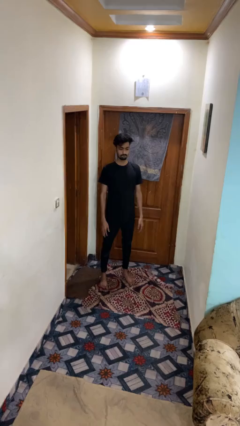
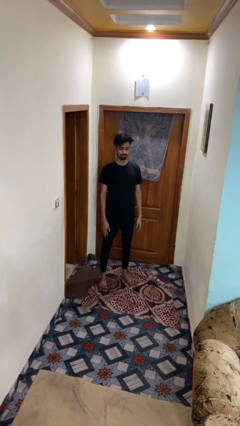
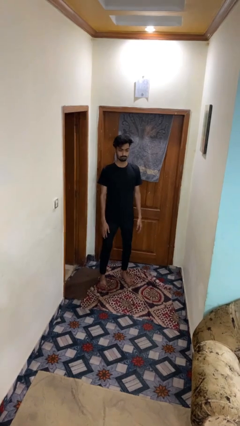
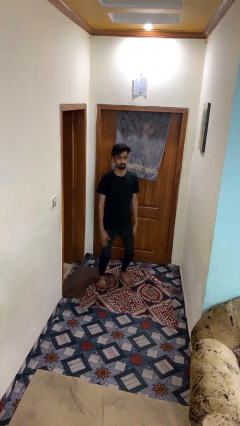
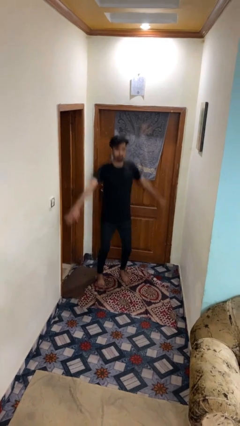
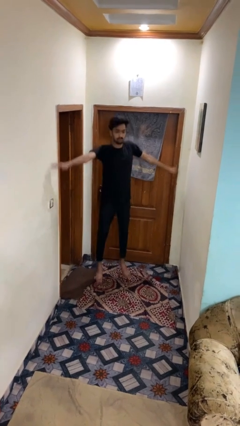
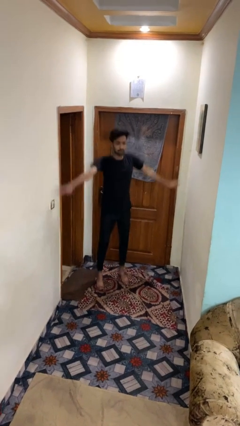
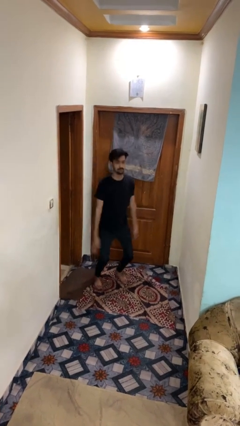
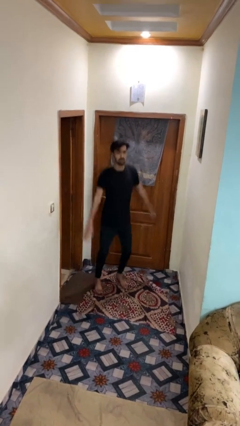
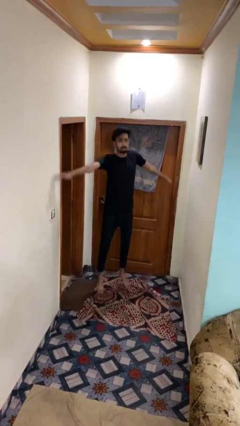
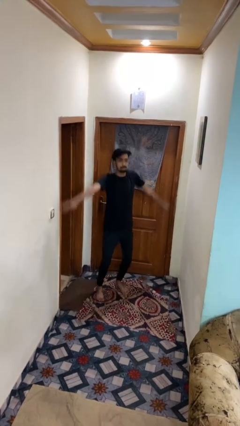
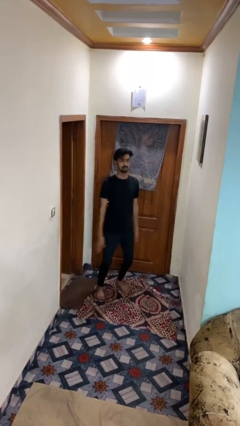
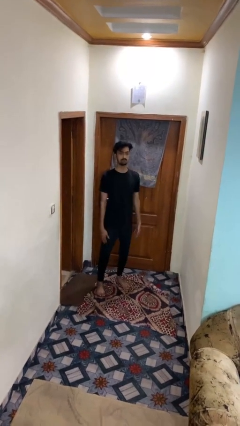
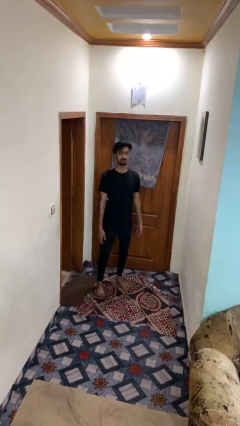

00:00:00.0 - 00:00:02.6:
person exercises with jumping jacks

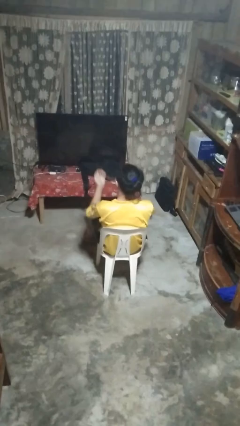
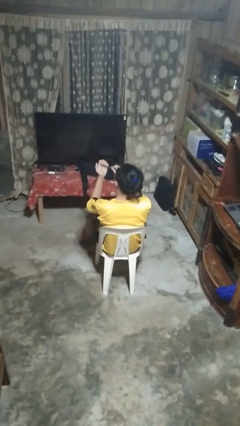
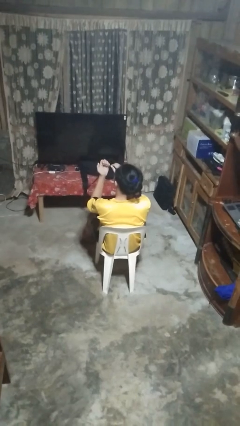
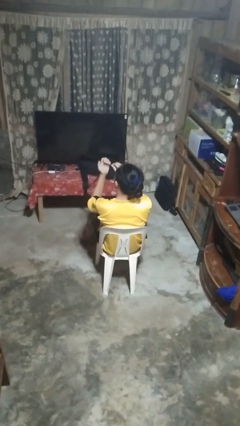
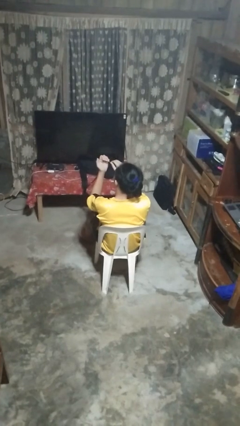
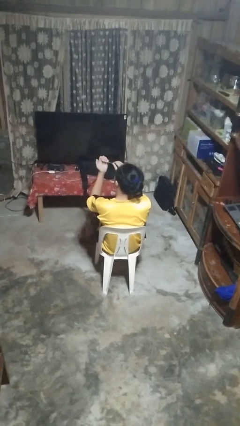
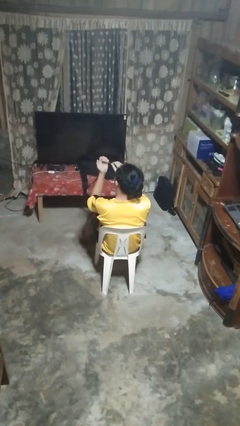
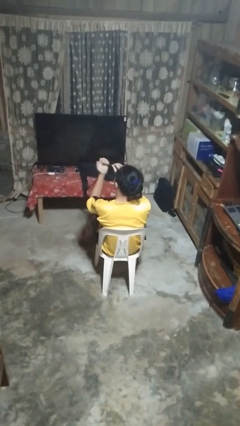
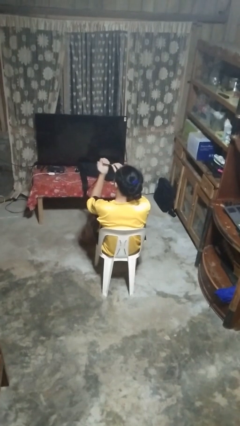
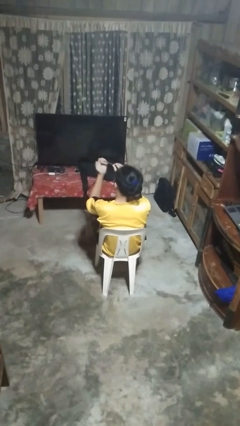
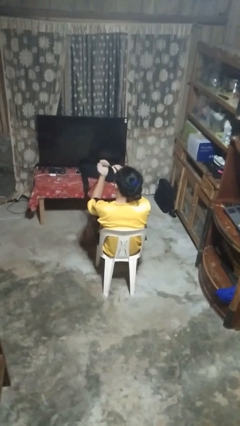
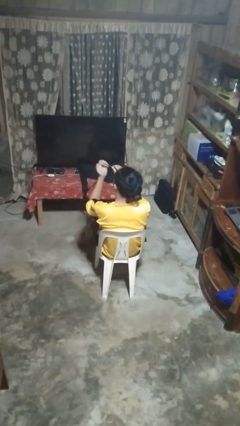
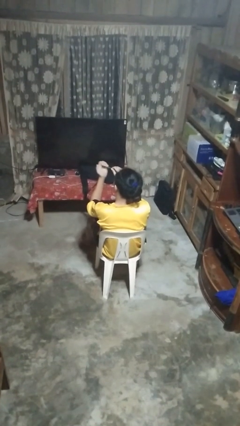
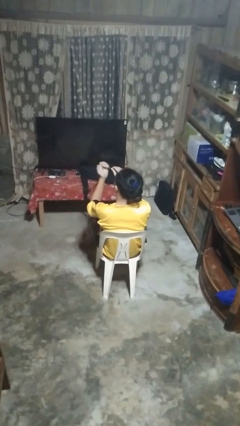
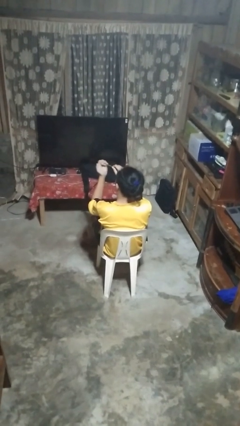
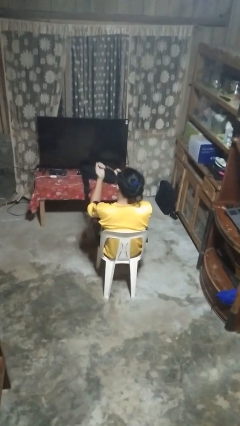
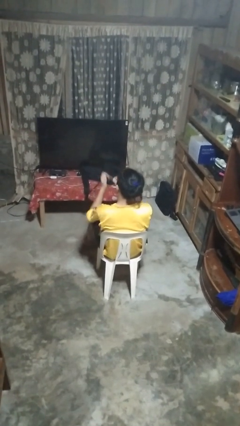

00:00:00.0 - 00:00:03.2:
person files fingernails

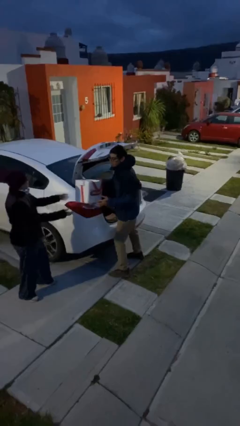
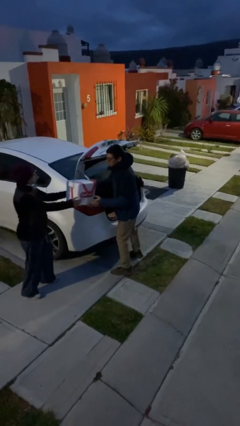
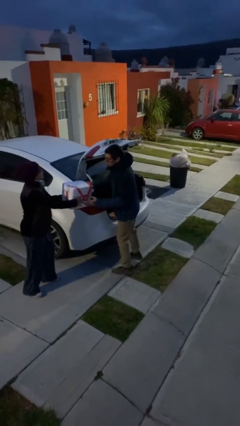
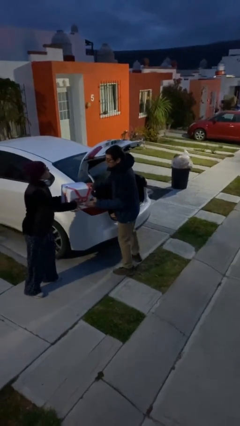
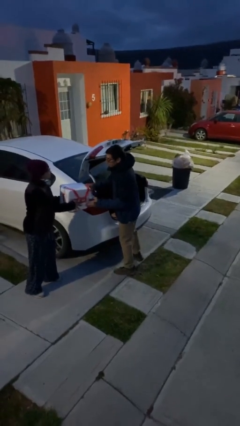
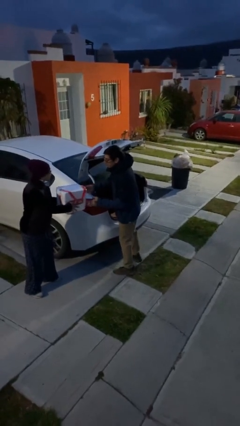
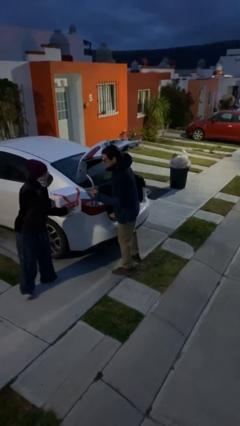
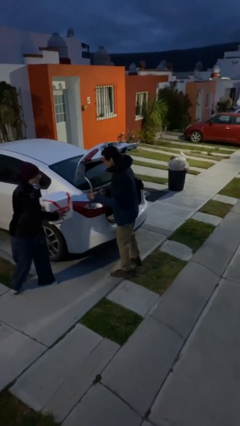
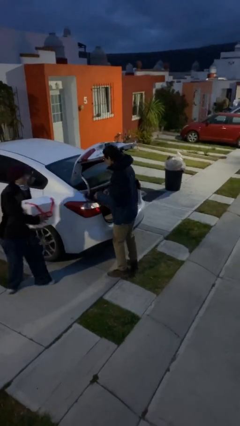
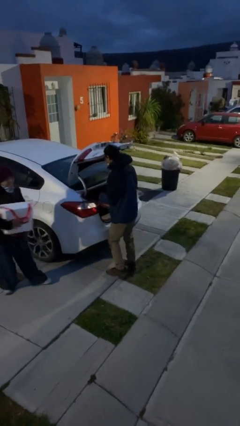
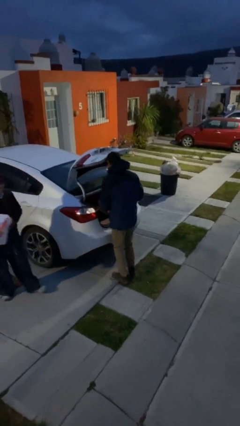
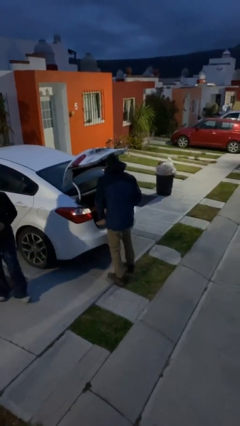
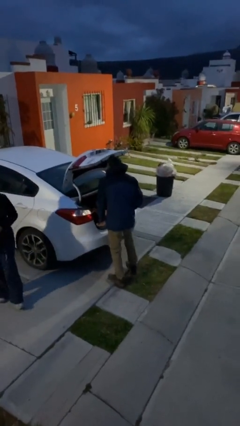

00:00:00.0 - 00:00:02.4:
person transfers object to person

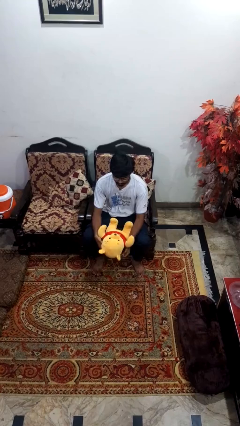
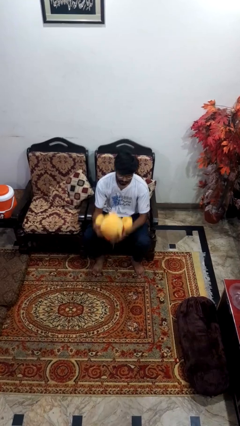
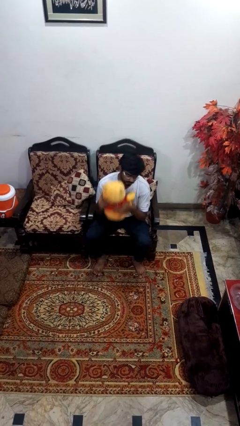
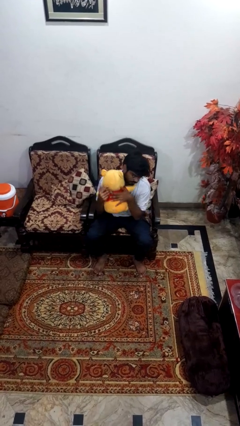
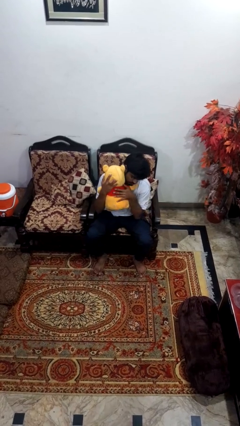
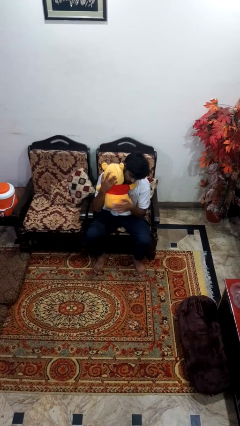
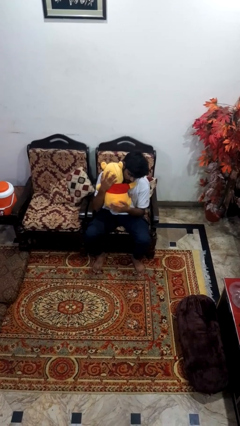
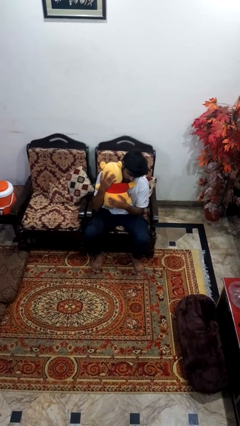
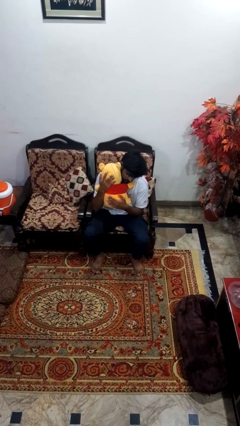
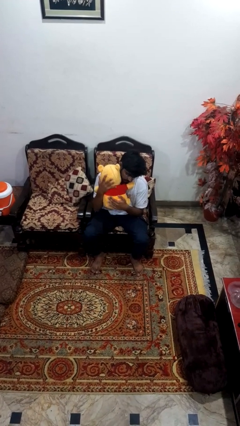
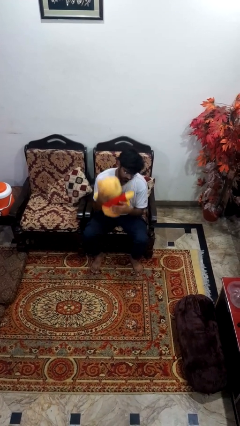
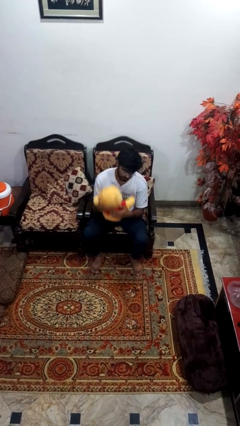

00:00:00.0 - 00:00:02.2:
person hugs stuffed animal

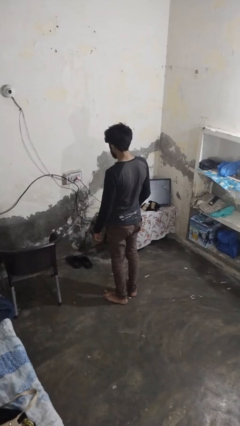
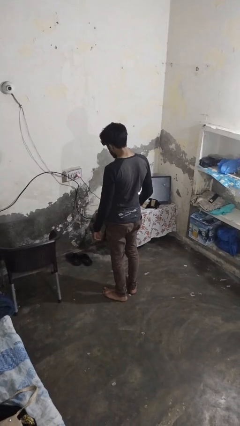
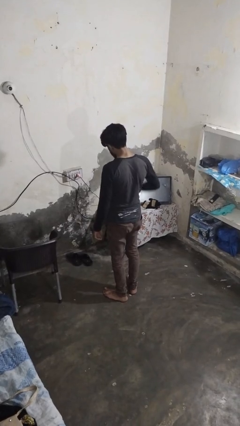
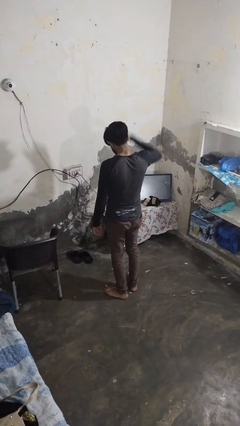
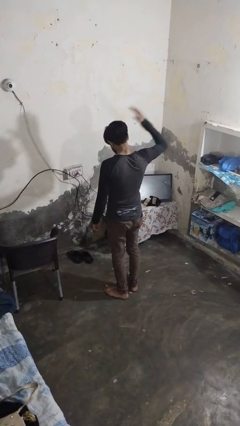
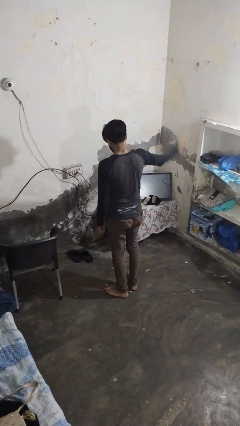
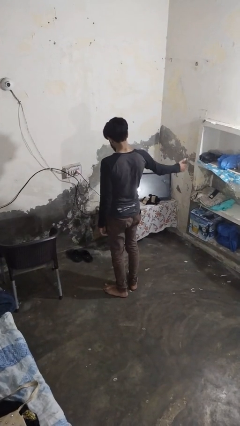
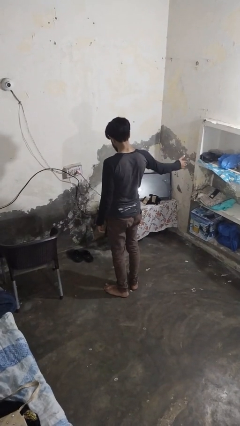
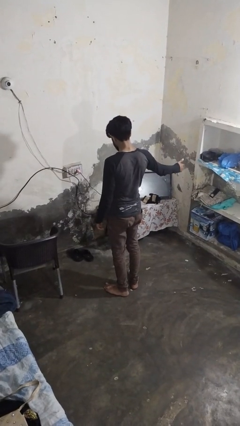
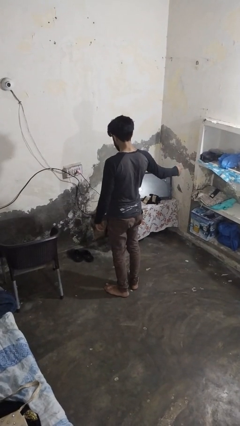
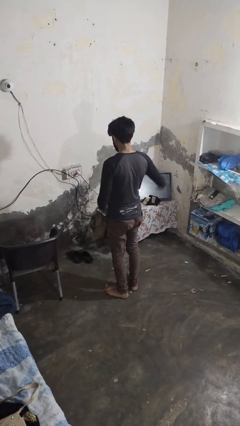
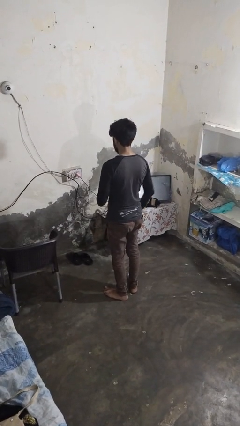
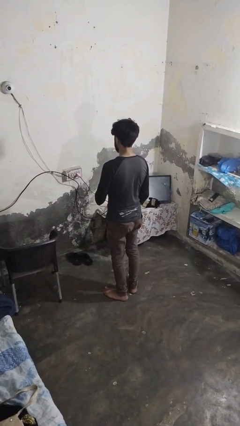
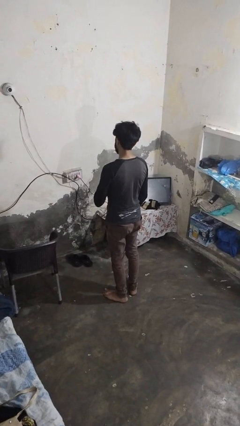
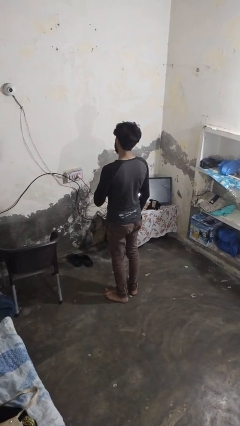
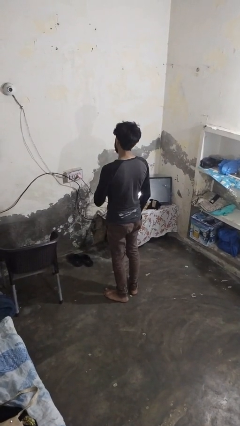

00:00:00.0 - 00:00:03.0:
person karate chop

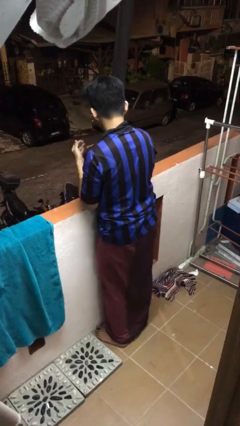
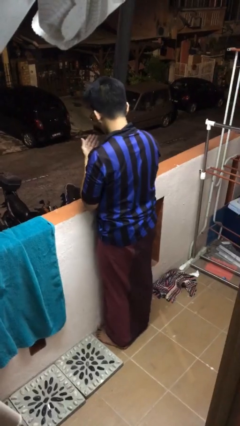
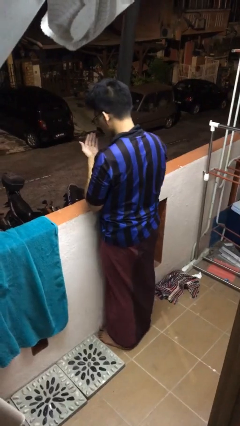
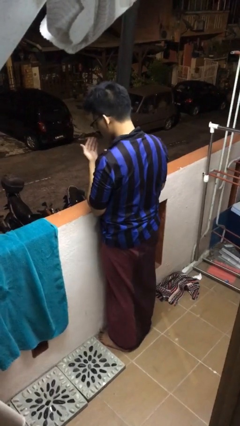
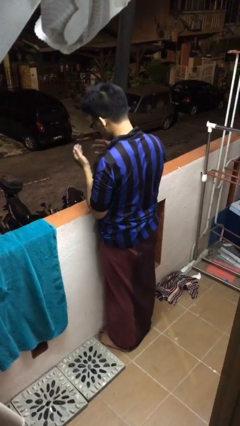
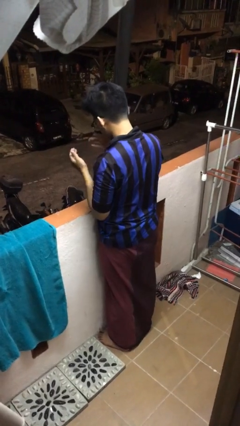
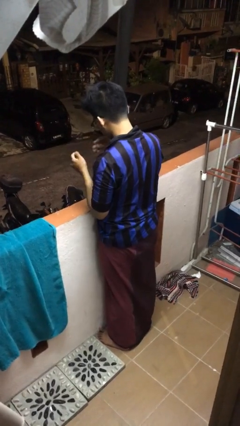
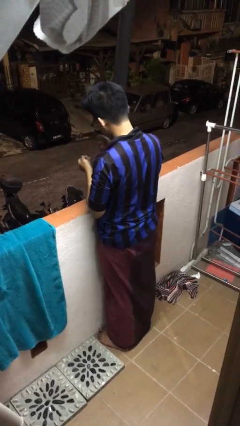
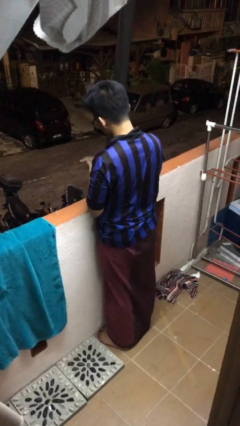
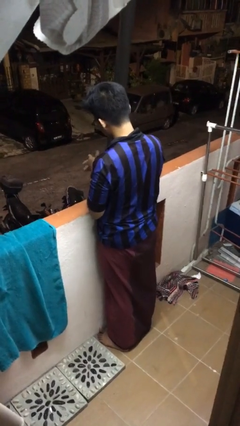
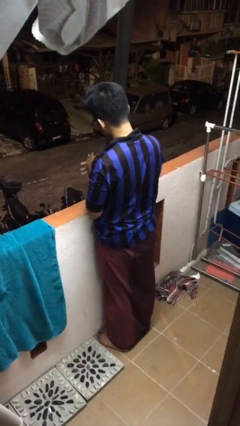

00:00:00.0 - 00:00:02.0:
person blows into hands

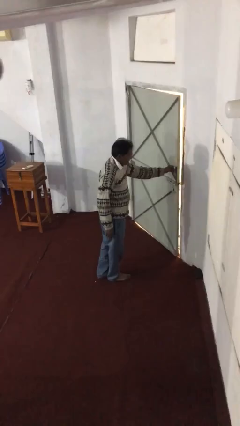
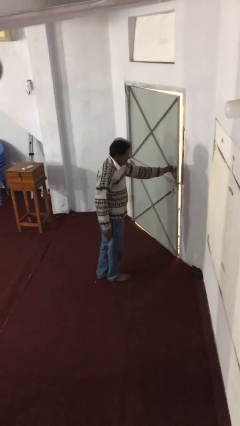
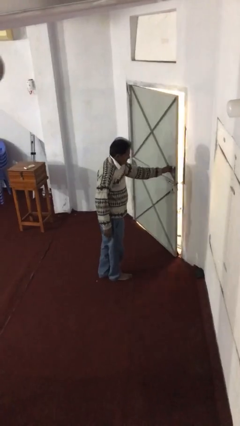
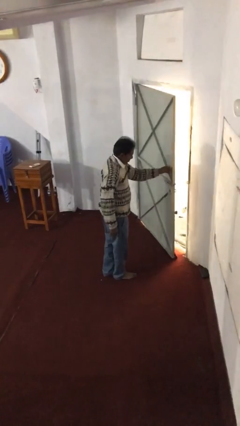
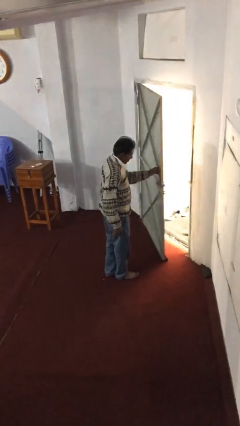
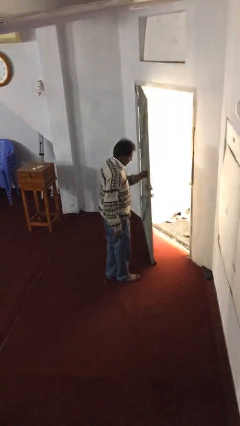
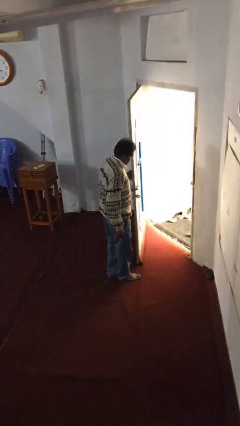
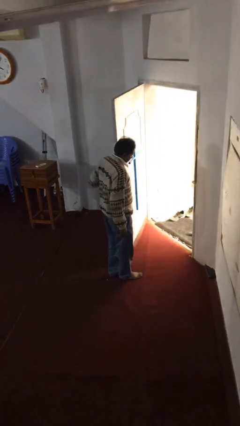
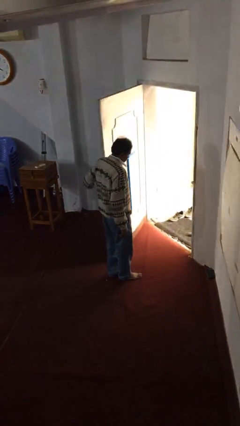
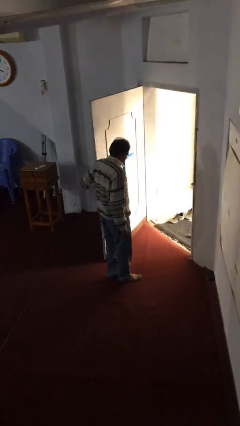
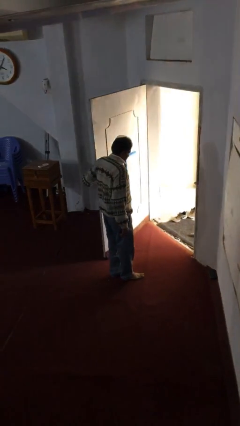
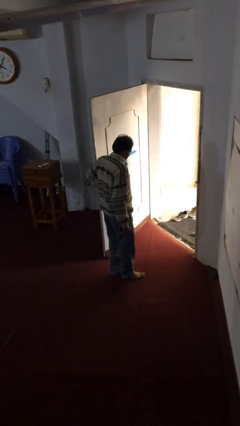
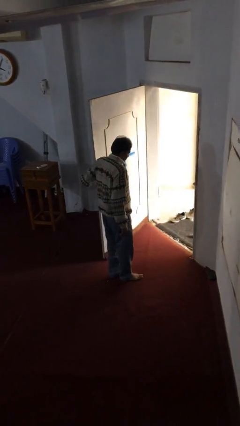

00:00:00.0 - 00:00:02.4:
person opens facility door
